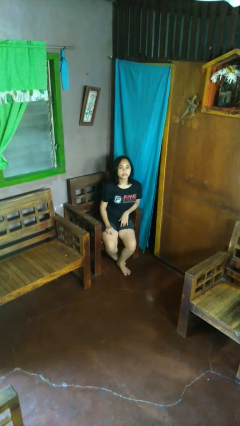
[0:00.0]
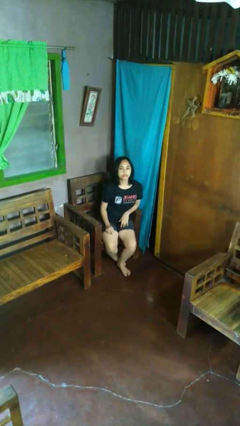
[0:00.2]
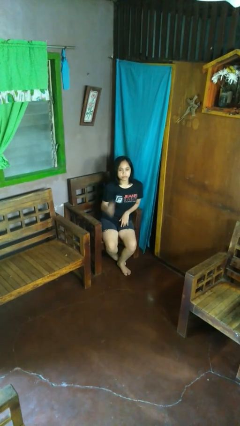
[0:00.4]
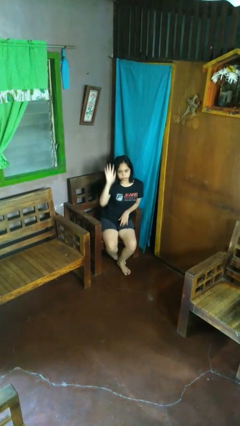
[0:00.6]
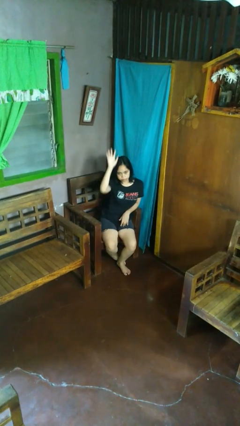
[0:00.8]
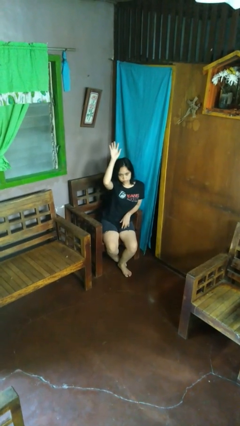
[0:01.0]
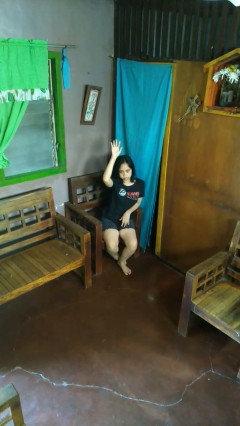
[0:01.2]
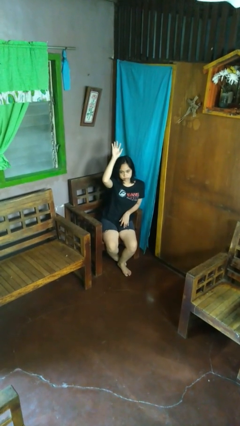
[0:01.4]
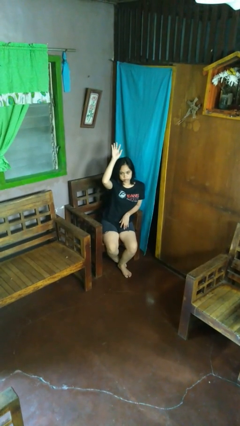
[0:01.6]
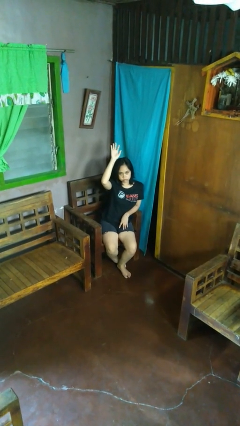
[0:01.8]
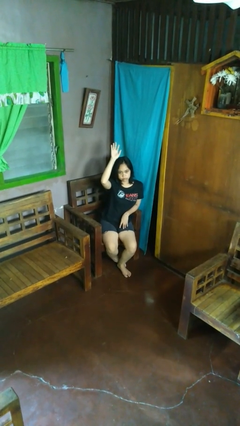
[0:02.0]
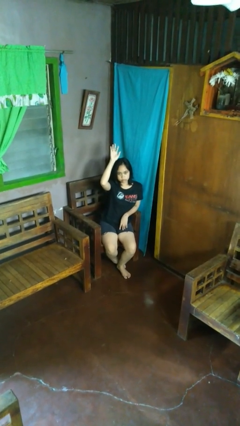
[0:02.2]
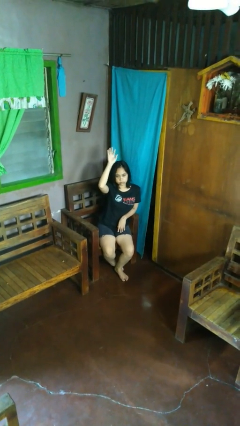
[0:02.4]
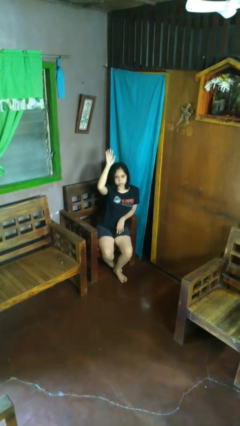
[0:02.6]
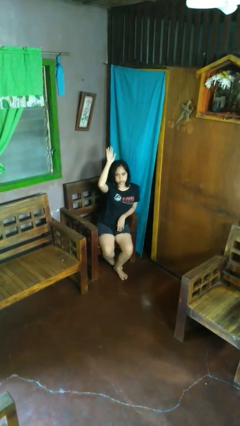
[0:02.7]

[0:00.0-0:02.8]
person gestures raise hand

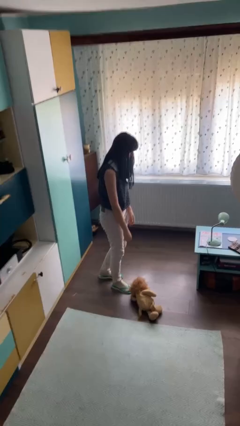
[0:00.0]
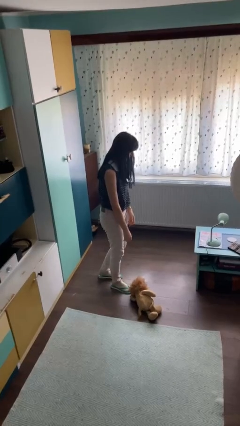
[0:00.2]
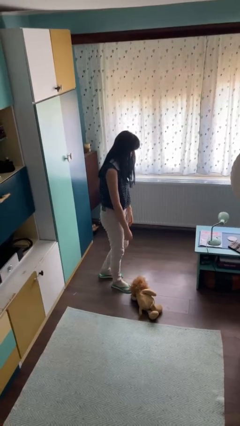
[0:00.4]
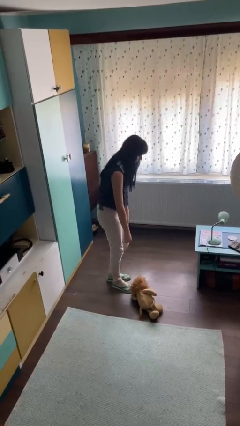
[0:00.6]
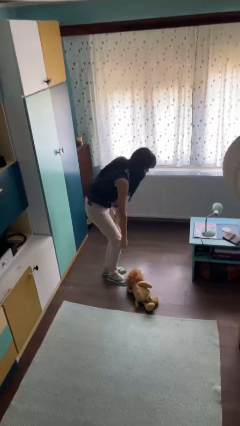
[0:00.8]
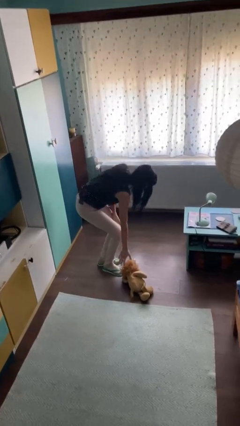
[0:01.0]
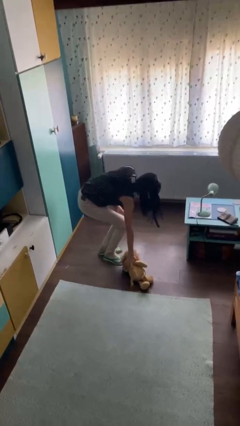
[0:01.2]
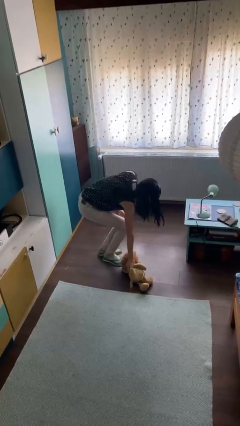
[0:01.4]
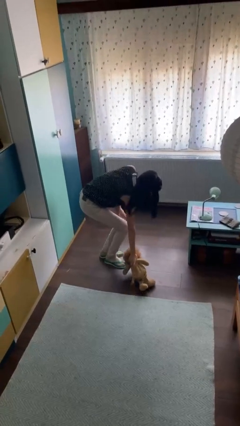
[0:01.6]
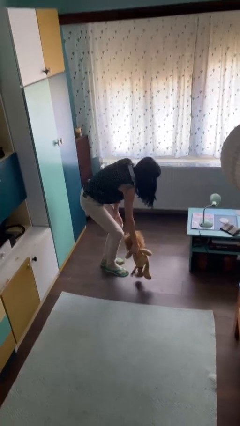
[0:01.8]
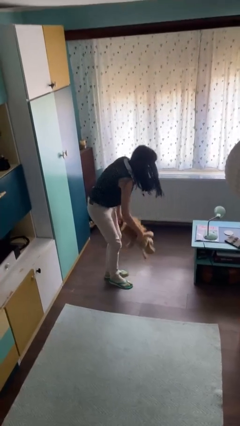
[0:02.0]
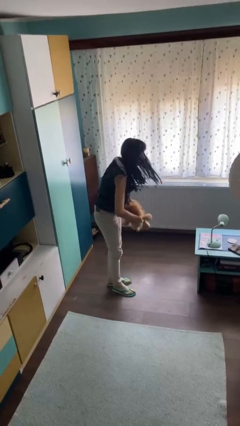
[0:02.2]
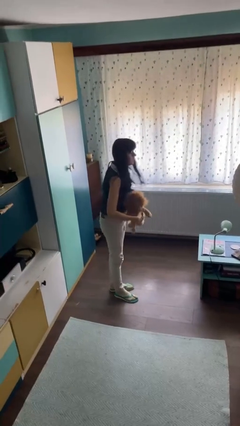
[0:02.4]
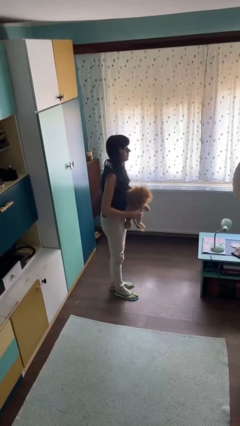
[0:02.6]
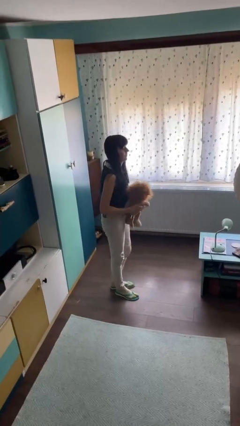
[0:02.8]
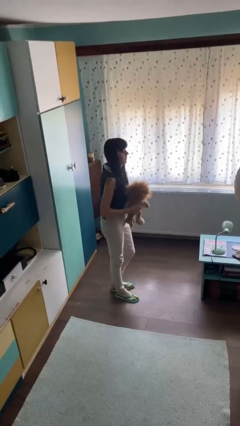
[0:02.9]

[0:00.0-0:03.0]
person picks up object from floor

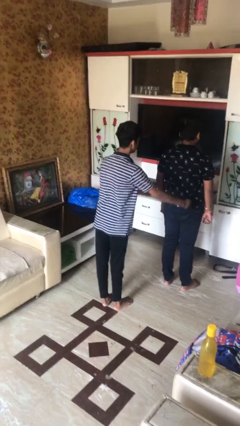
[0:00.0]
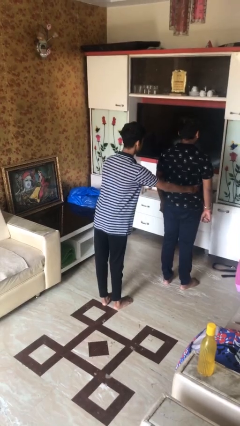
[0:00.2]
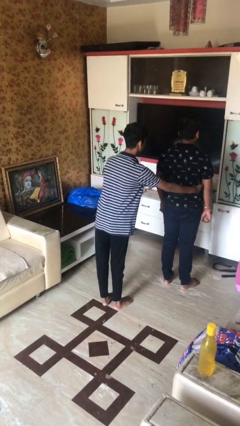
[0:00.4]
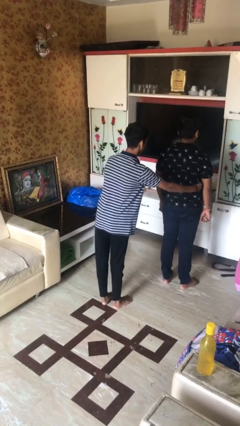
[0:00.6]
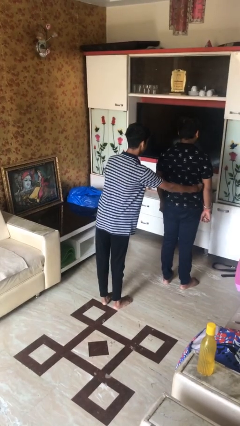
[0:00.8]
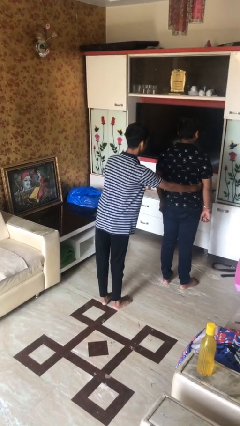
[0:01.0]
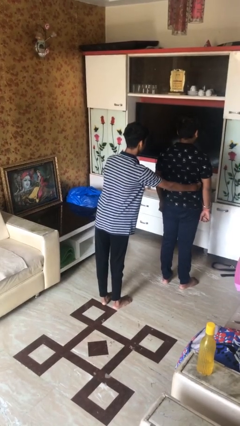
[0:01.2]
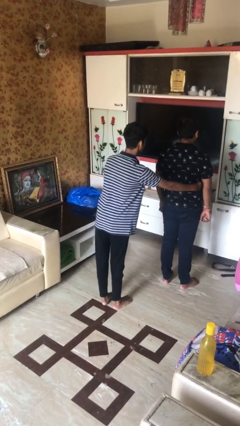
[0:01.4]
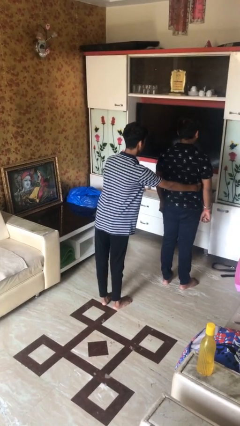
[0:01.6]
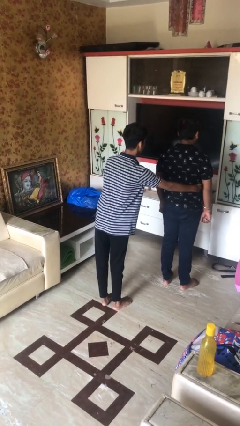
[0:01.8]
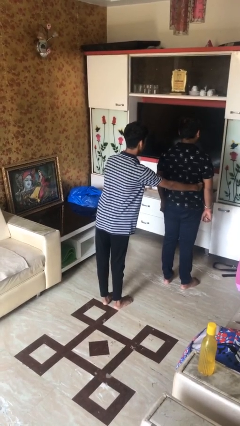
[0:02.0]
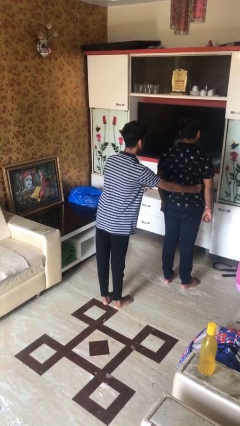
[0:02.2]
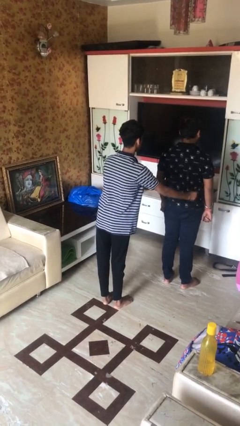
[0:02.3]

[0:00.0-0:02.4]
person tickles person

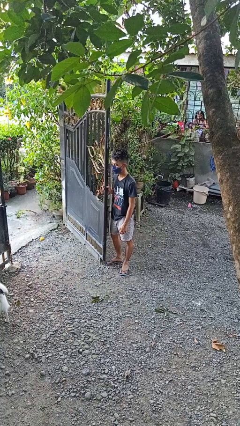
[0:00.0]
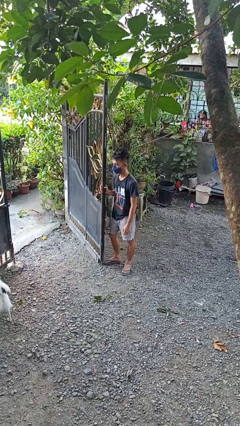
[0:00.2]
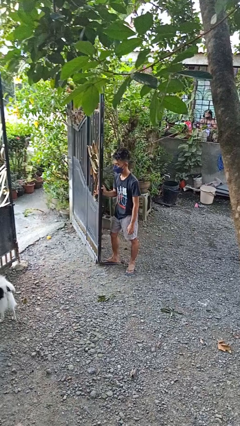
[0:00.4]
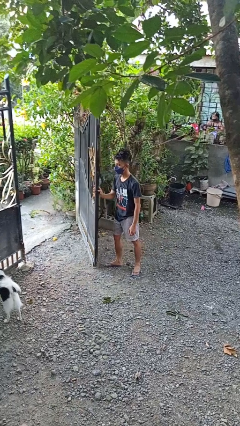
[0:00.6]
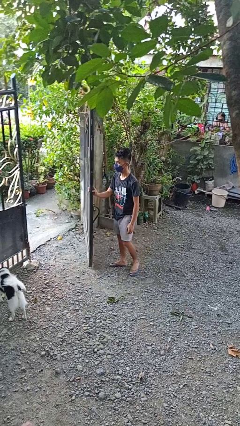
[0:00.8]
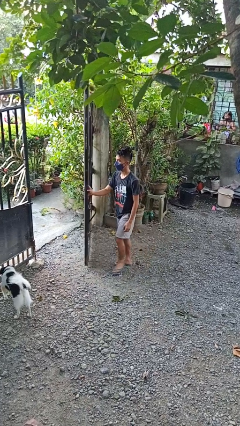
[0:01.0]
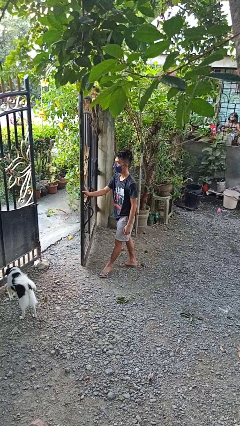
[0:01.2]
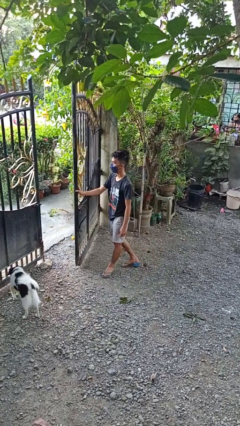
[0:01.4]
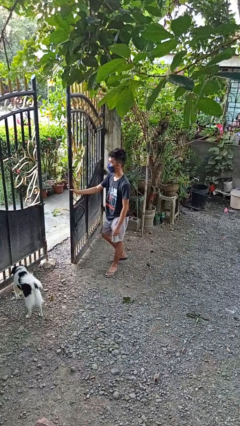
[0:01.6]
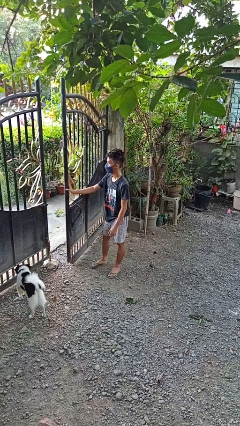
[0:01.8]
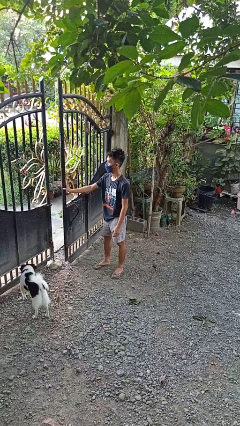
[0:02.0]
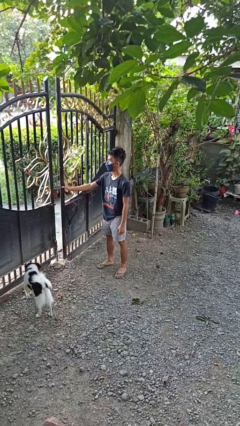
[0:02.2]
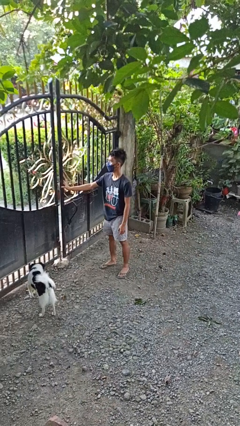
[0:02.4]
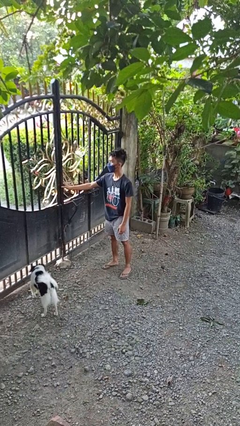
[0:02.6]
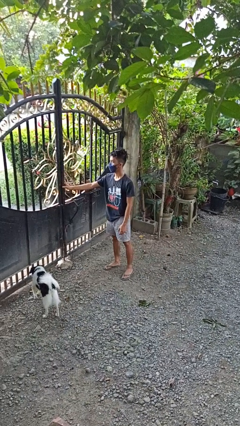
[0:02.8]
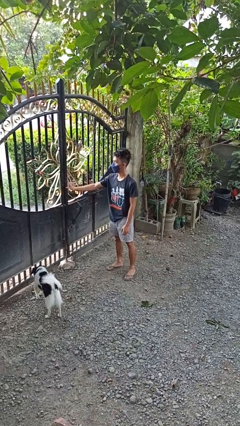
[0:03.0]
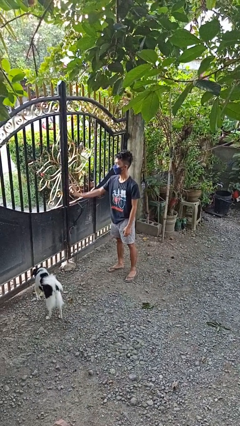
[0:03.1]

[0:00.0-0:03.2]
person closes gate

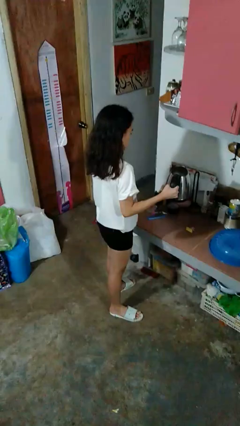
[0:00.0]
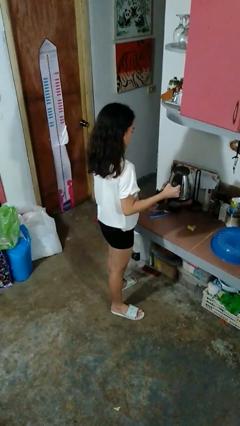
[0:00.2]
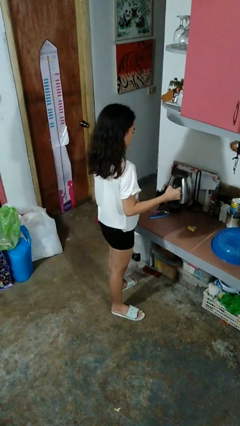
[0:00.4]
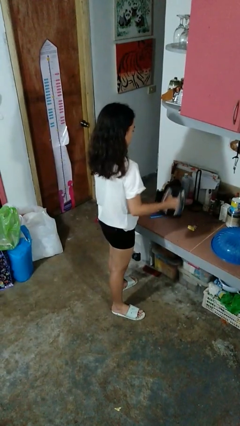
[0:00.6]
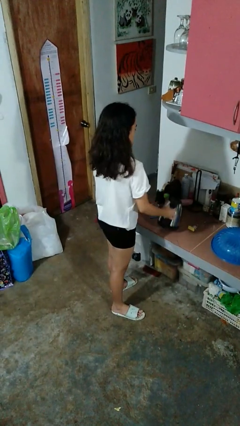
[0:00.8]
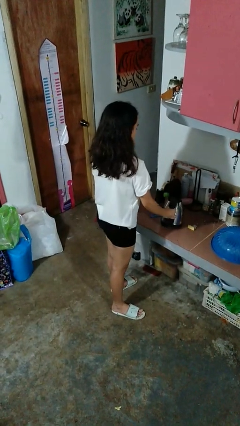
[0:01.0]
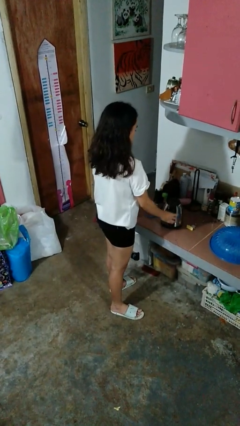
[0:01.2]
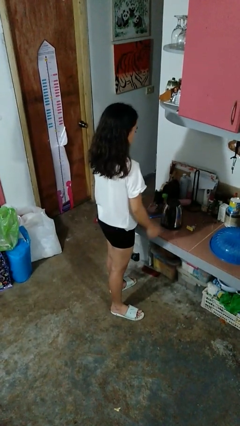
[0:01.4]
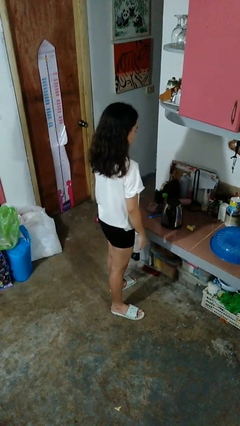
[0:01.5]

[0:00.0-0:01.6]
person puts down object on countertop

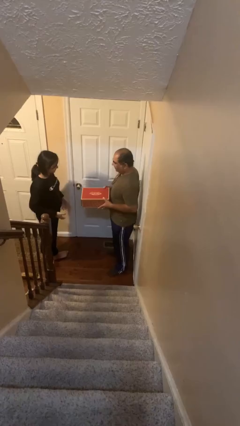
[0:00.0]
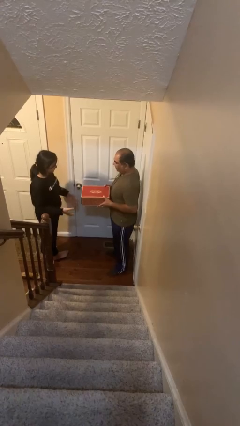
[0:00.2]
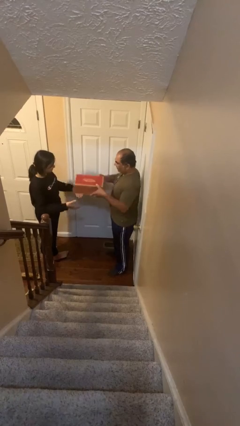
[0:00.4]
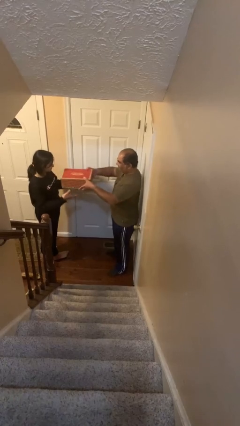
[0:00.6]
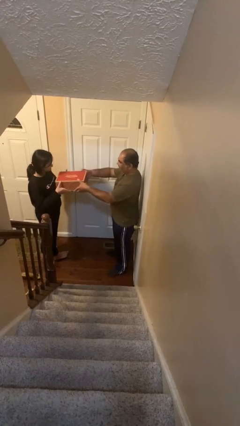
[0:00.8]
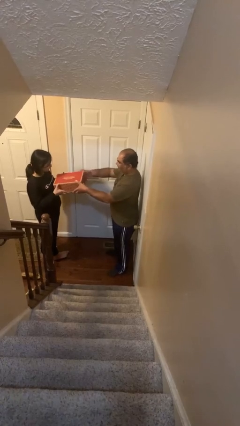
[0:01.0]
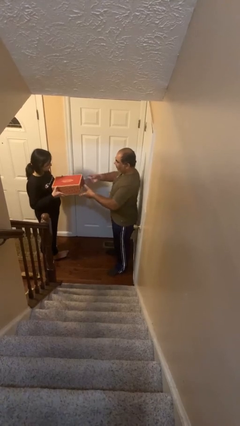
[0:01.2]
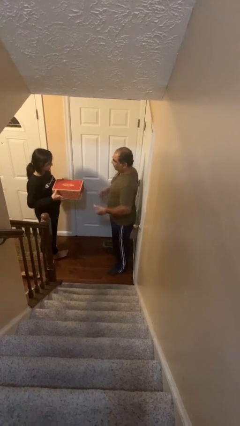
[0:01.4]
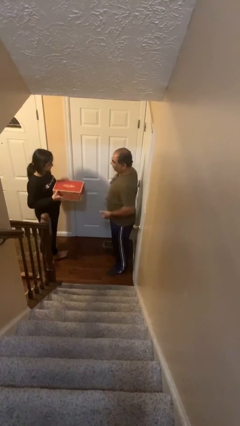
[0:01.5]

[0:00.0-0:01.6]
person transfers object to person

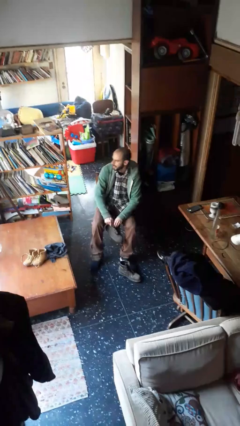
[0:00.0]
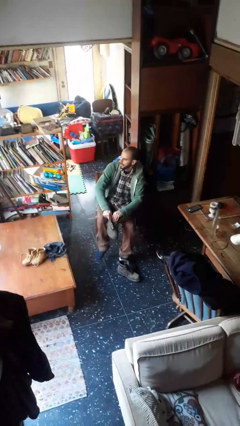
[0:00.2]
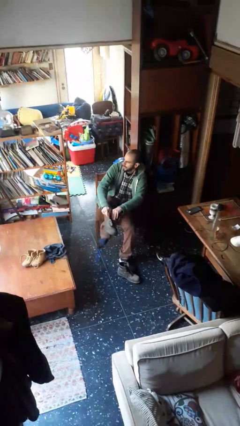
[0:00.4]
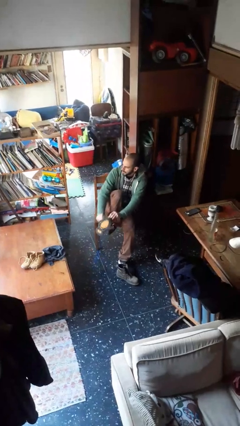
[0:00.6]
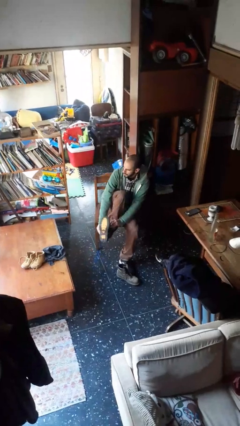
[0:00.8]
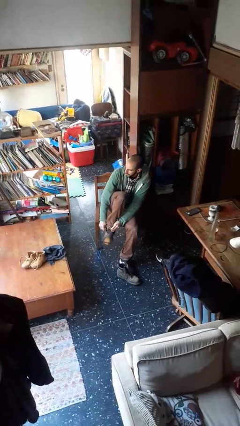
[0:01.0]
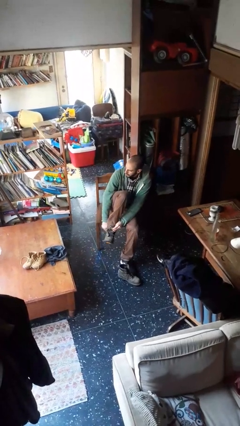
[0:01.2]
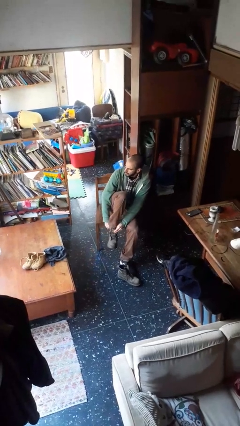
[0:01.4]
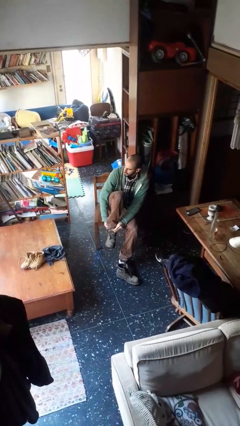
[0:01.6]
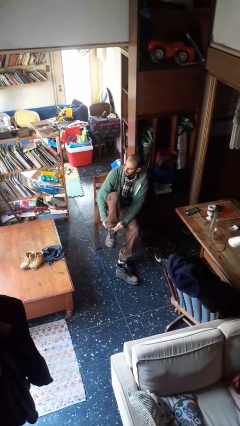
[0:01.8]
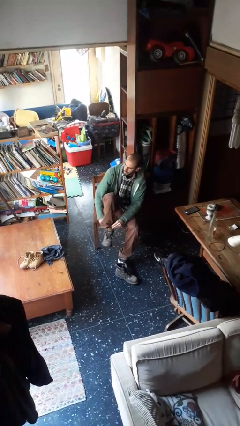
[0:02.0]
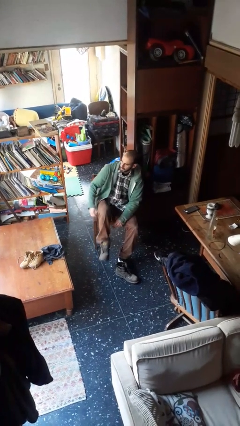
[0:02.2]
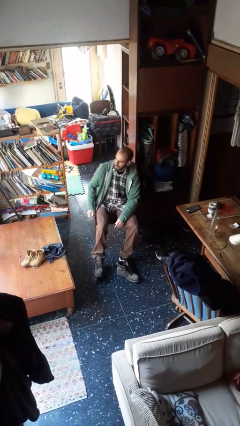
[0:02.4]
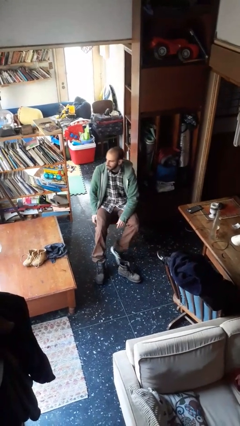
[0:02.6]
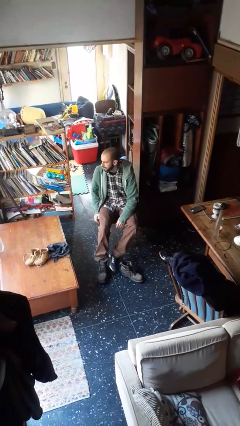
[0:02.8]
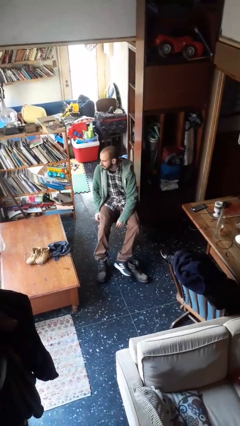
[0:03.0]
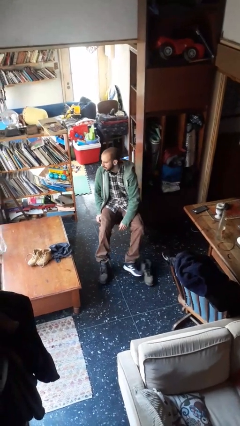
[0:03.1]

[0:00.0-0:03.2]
person puts on boots
